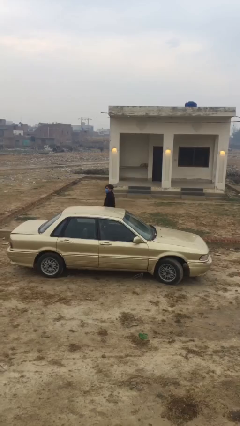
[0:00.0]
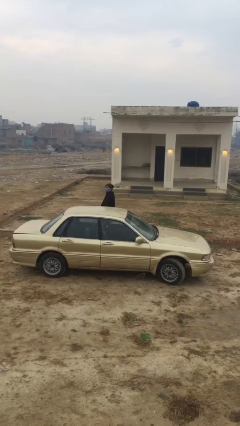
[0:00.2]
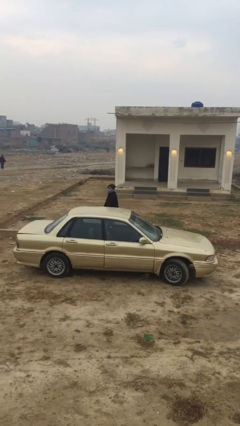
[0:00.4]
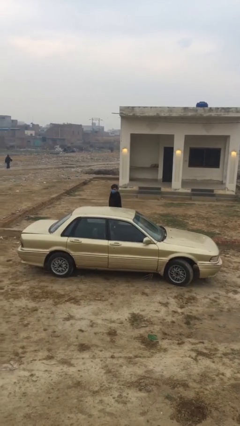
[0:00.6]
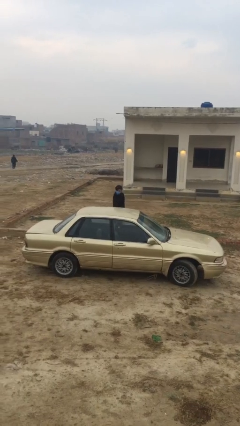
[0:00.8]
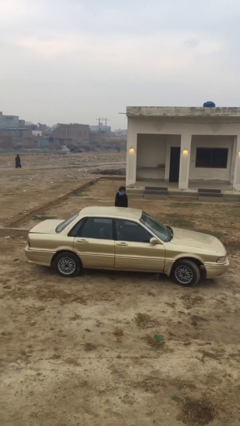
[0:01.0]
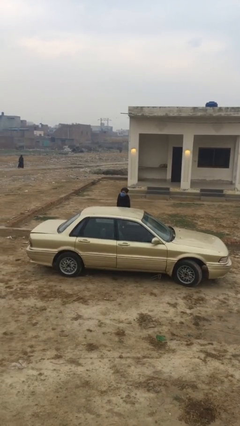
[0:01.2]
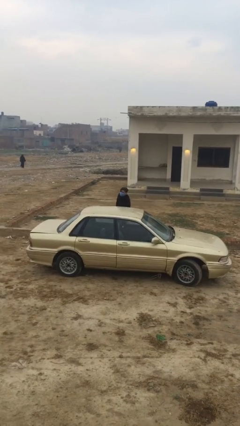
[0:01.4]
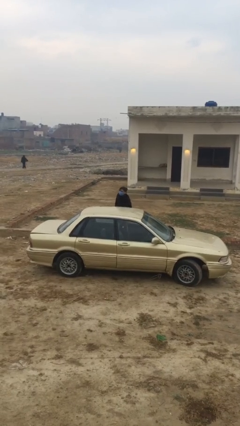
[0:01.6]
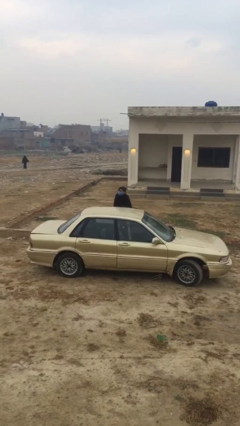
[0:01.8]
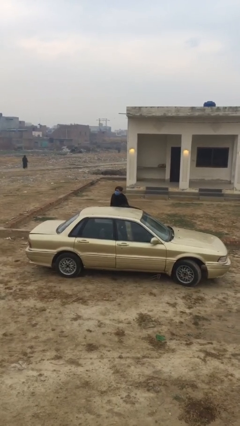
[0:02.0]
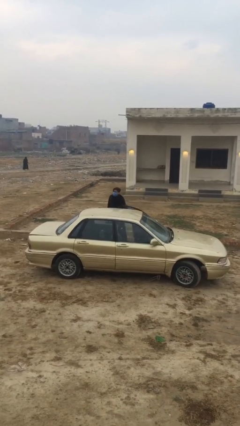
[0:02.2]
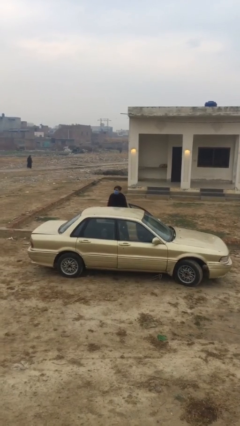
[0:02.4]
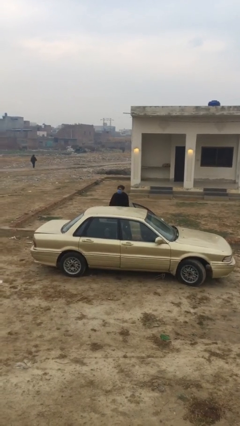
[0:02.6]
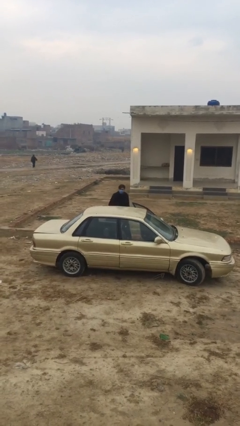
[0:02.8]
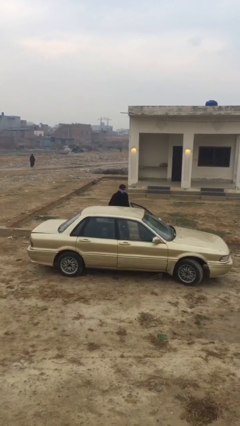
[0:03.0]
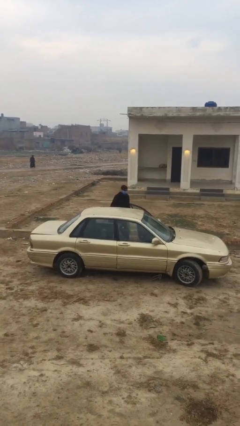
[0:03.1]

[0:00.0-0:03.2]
person opens car door

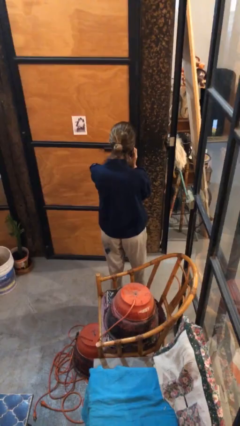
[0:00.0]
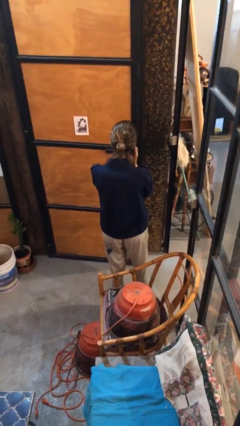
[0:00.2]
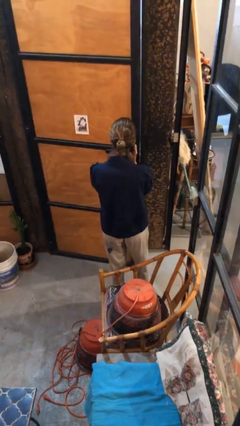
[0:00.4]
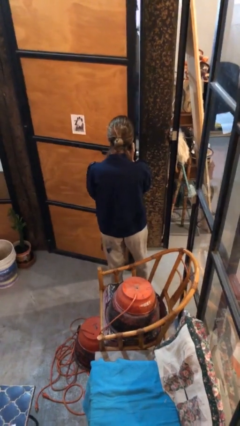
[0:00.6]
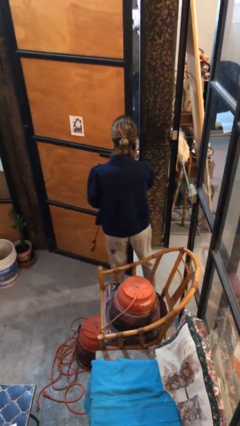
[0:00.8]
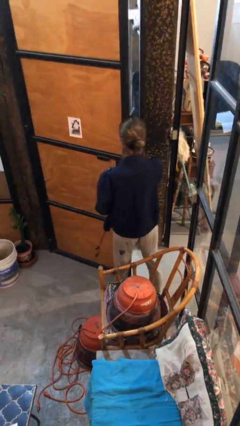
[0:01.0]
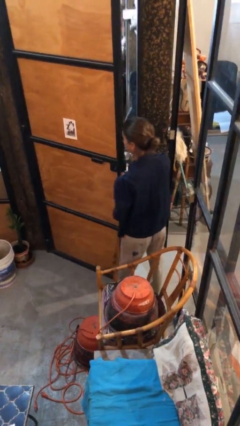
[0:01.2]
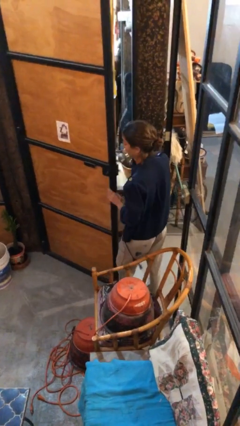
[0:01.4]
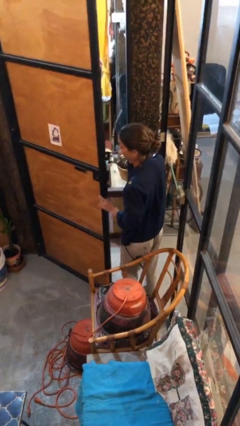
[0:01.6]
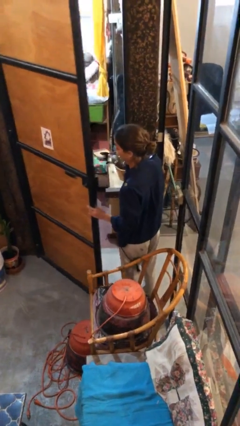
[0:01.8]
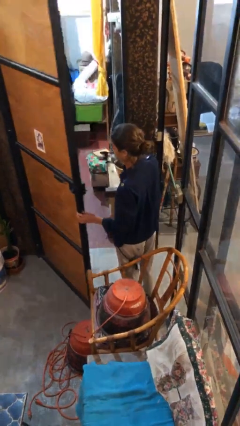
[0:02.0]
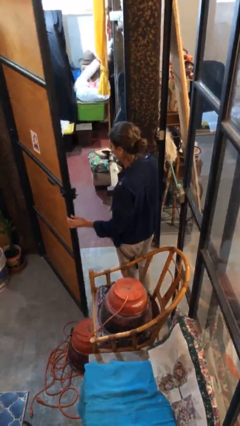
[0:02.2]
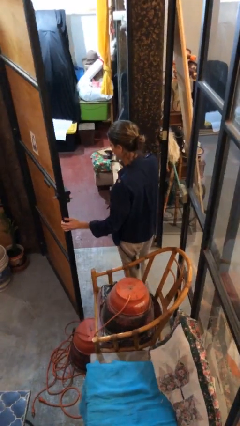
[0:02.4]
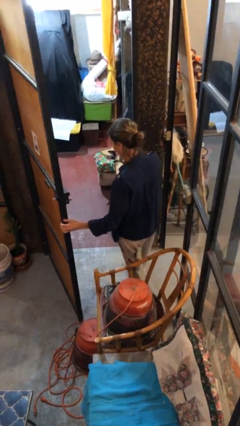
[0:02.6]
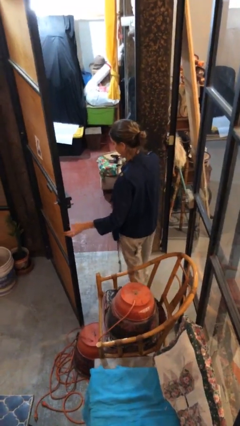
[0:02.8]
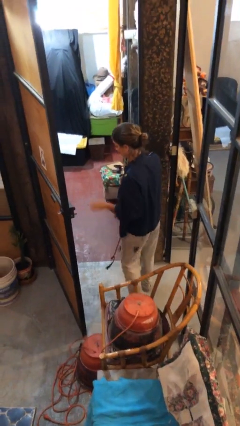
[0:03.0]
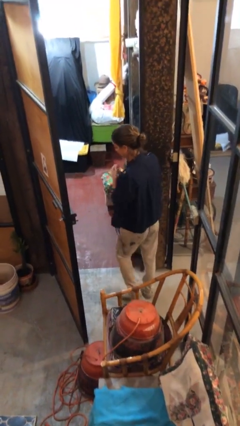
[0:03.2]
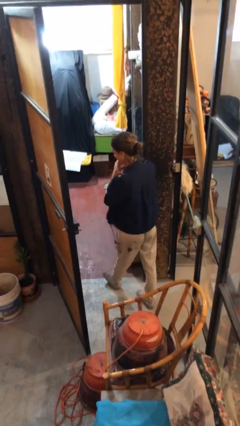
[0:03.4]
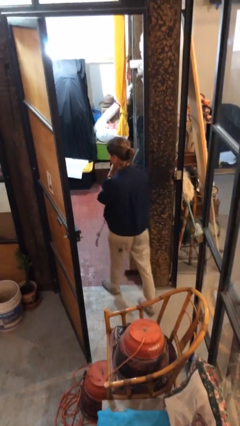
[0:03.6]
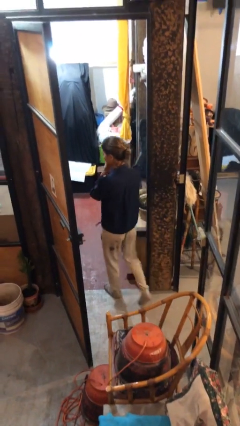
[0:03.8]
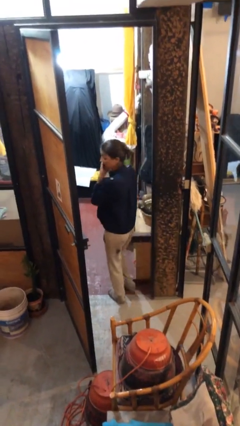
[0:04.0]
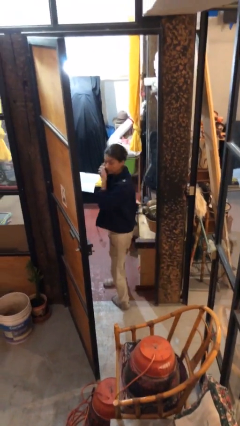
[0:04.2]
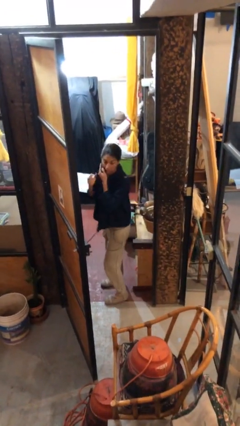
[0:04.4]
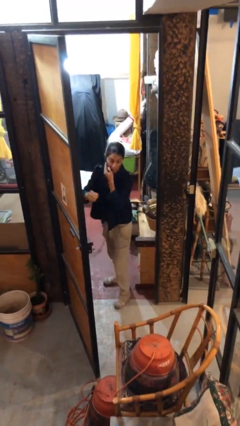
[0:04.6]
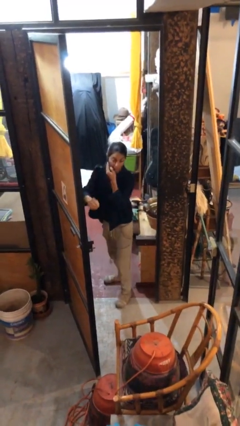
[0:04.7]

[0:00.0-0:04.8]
person exits scene through structure

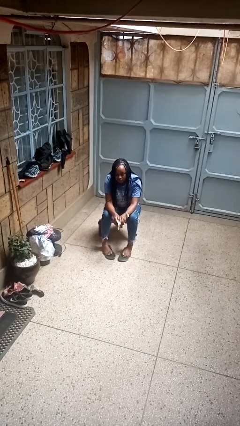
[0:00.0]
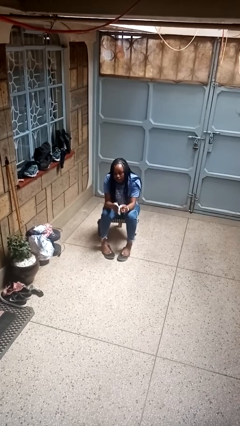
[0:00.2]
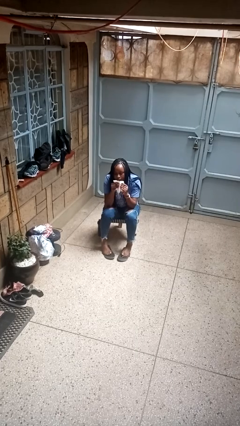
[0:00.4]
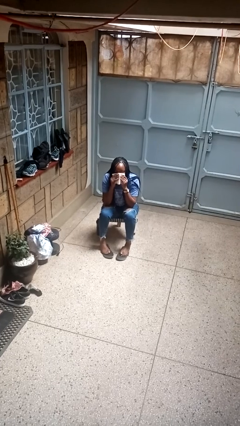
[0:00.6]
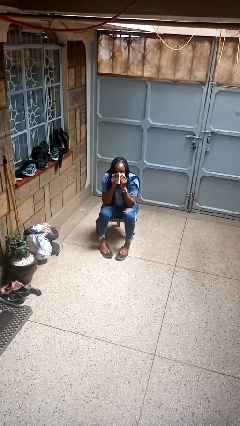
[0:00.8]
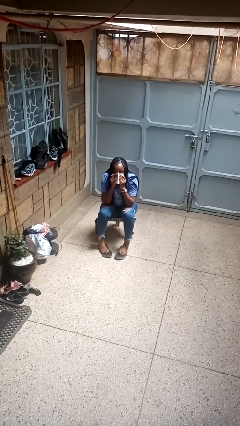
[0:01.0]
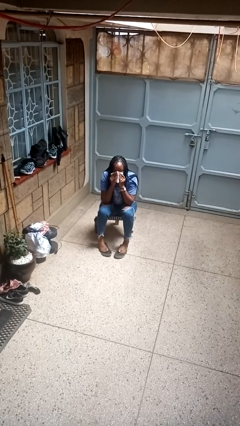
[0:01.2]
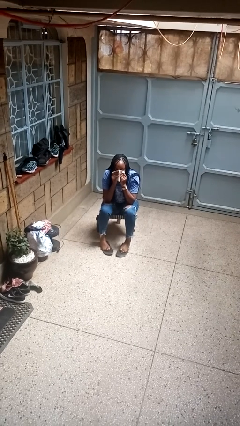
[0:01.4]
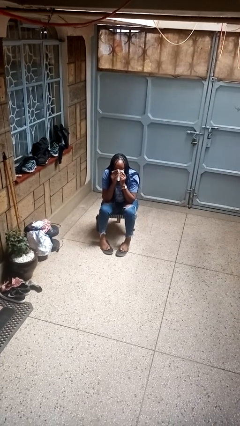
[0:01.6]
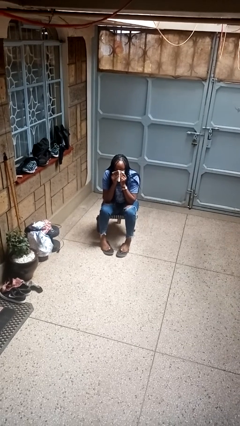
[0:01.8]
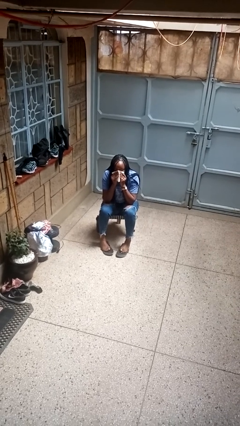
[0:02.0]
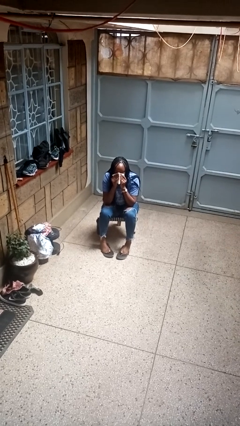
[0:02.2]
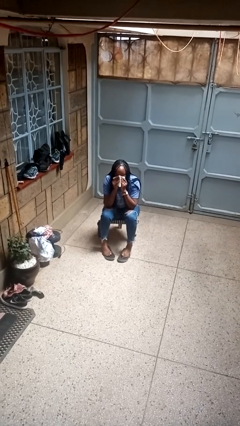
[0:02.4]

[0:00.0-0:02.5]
person blows nose

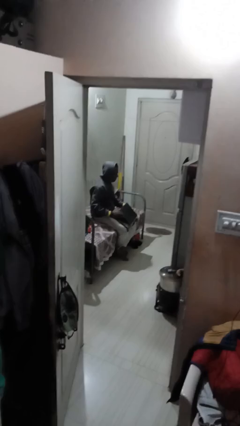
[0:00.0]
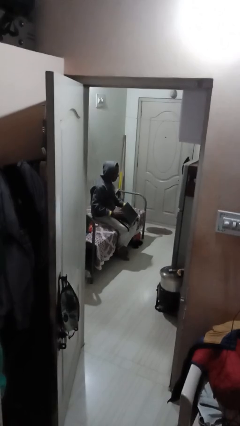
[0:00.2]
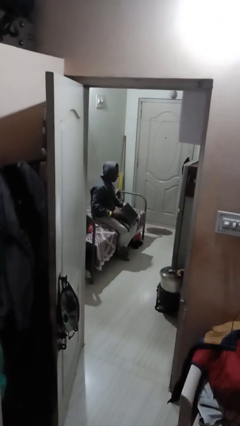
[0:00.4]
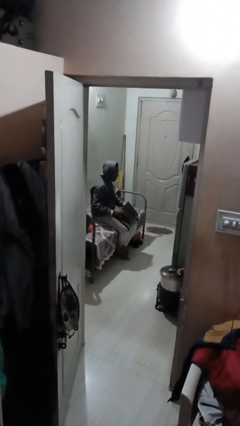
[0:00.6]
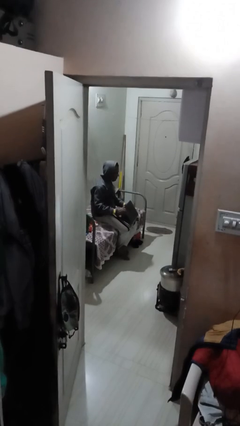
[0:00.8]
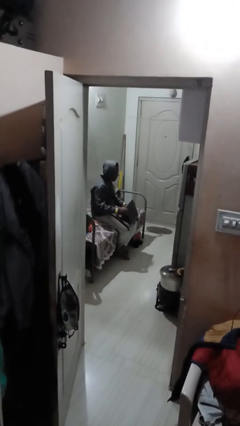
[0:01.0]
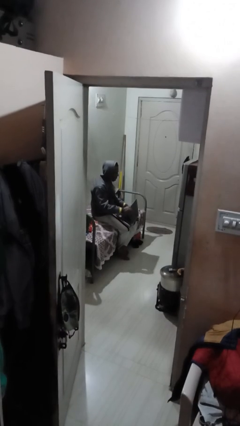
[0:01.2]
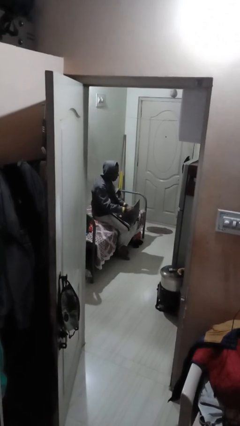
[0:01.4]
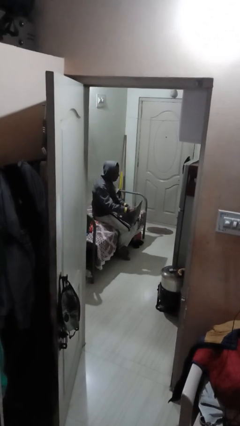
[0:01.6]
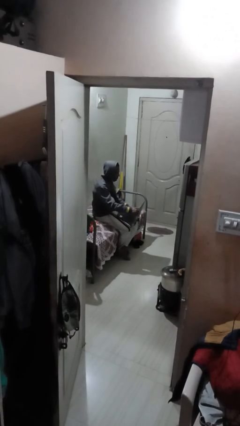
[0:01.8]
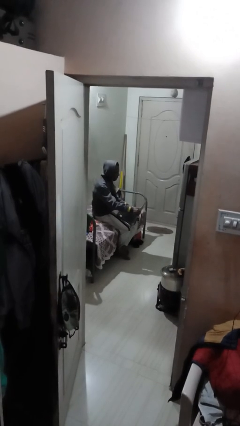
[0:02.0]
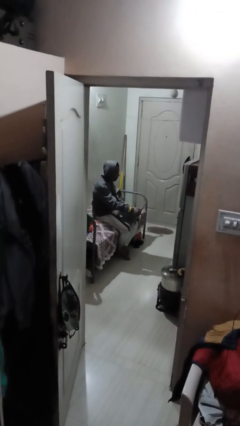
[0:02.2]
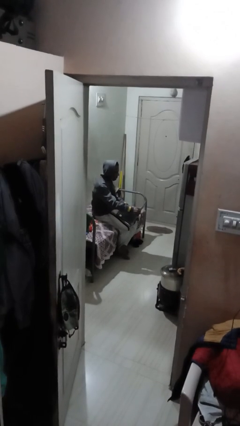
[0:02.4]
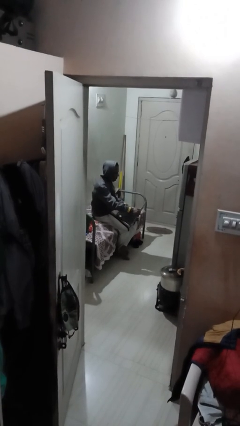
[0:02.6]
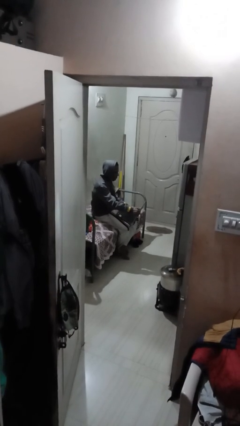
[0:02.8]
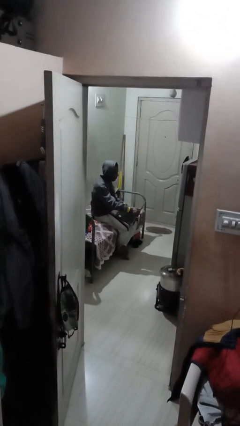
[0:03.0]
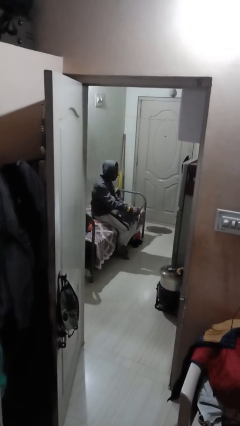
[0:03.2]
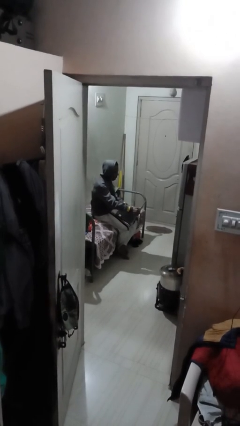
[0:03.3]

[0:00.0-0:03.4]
person interacts with laptop

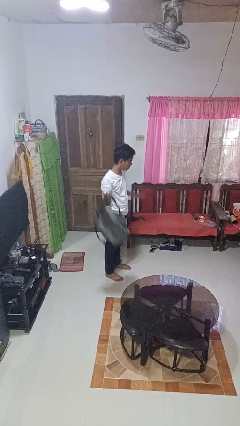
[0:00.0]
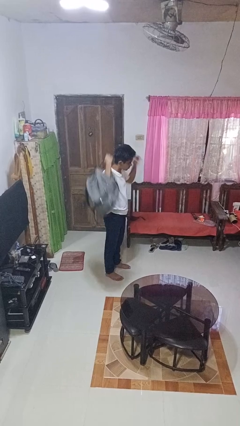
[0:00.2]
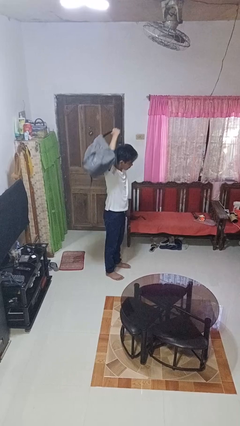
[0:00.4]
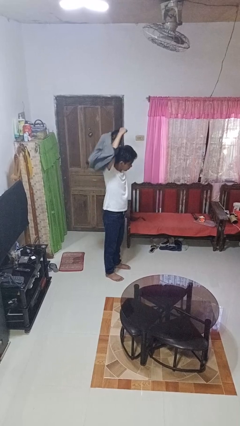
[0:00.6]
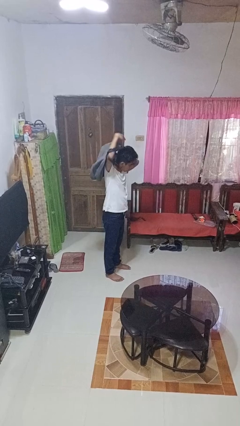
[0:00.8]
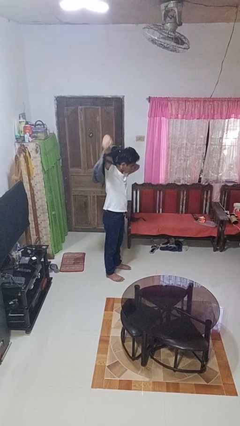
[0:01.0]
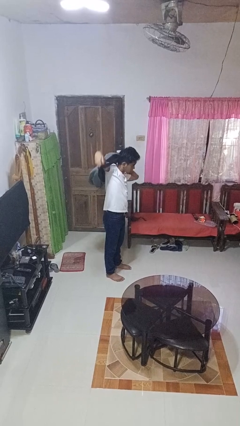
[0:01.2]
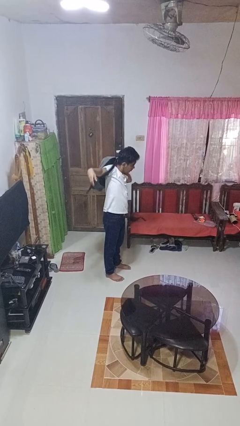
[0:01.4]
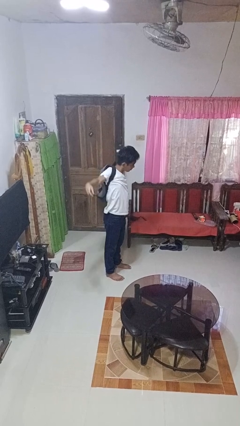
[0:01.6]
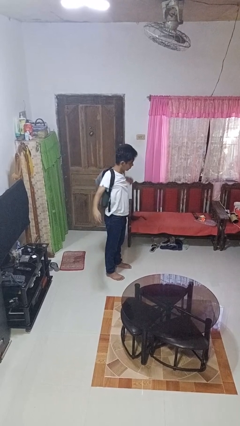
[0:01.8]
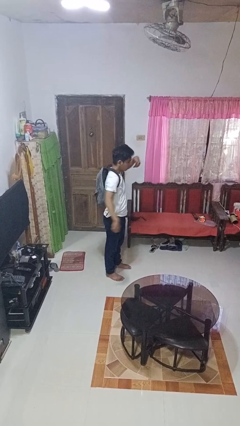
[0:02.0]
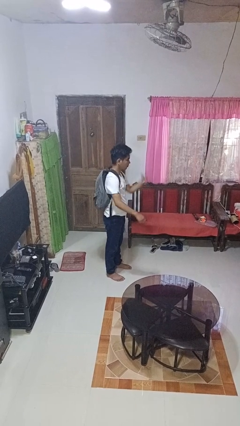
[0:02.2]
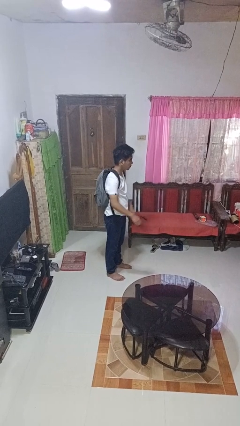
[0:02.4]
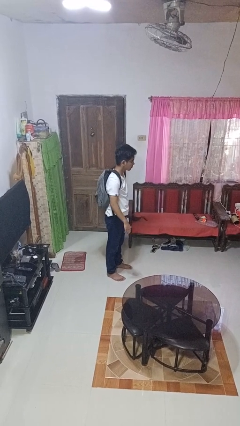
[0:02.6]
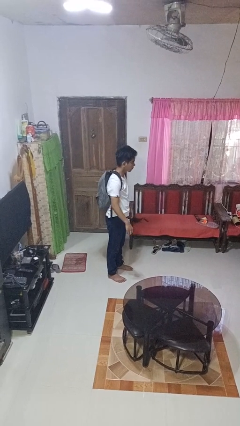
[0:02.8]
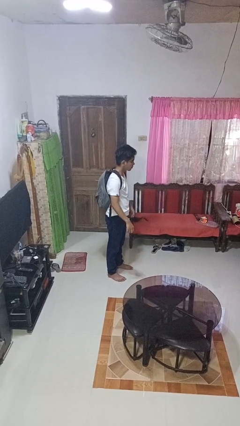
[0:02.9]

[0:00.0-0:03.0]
person puts on backpack

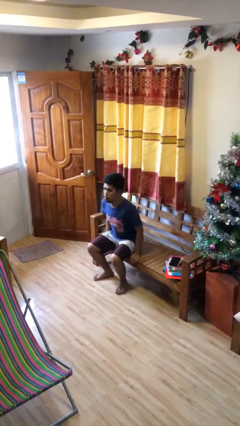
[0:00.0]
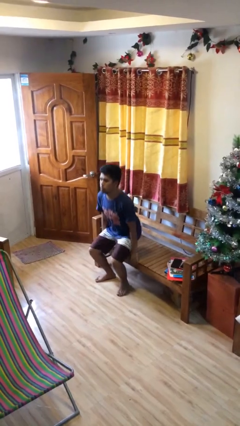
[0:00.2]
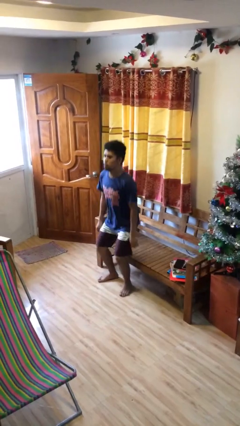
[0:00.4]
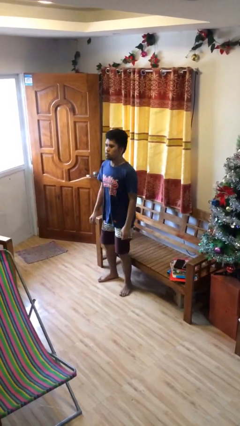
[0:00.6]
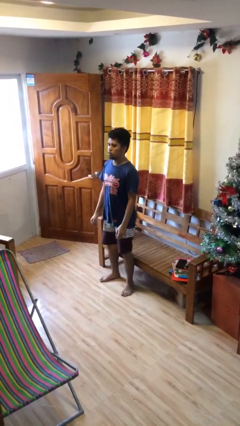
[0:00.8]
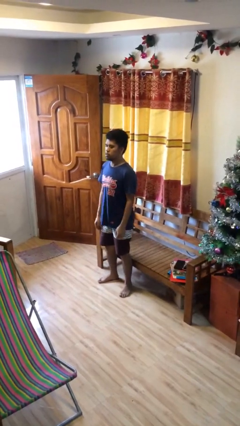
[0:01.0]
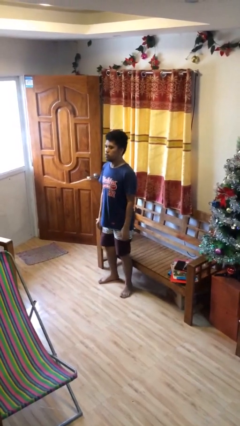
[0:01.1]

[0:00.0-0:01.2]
person stands up
